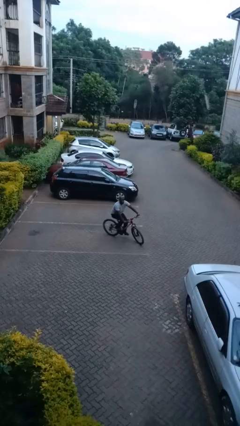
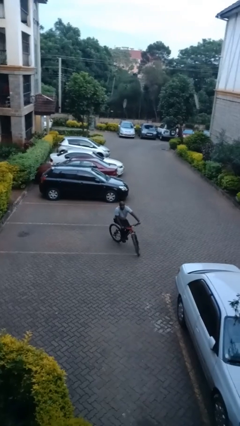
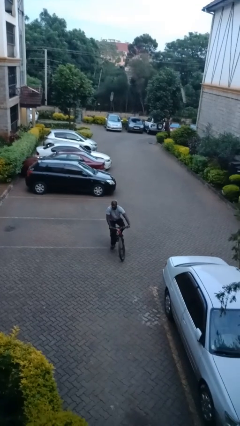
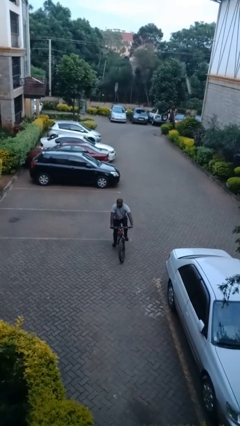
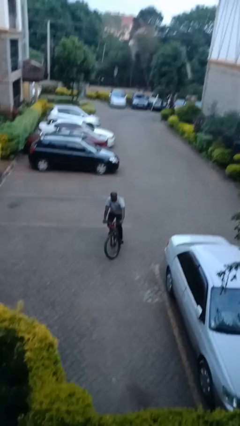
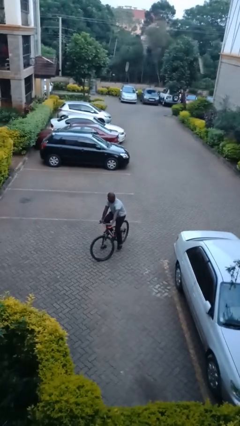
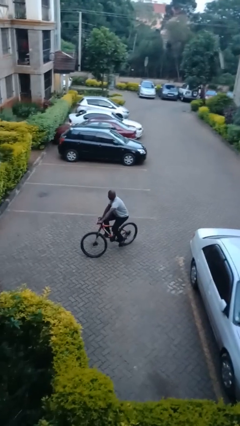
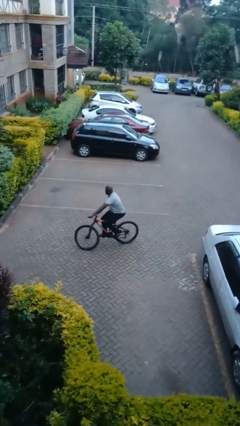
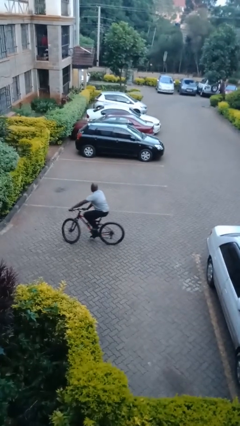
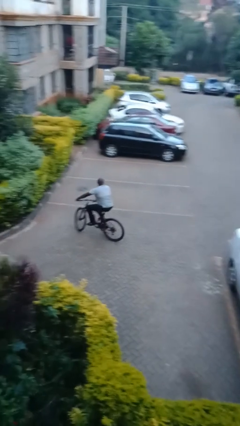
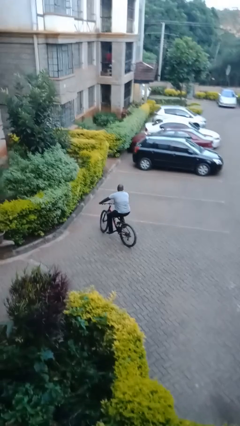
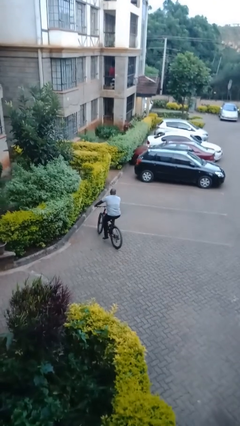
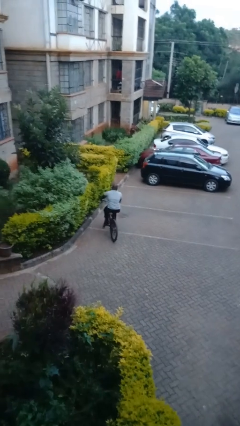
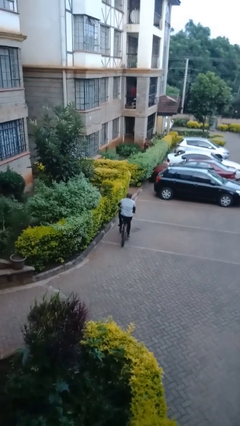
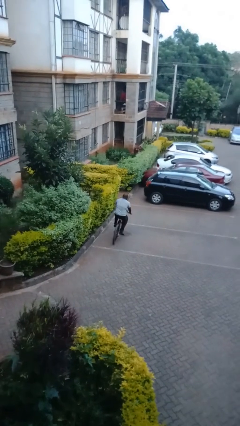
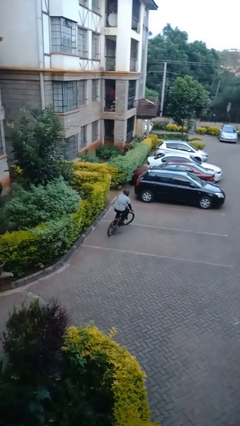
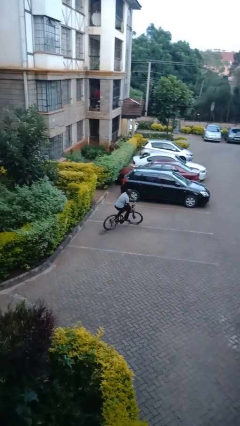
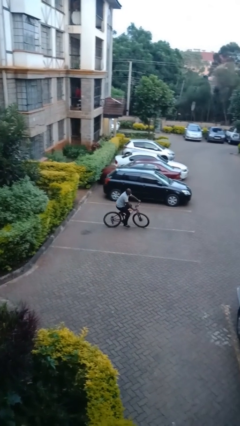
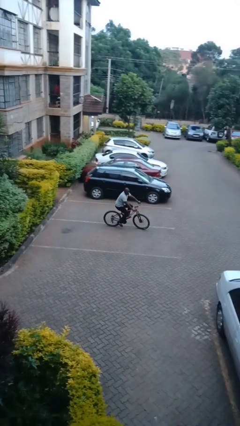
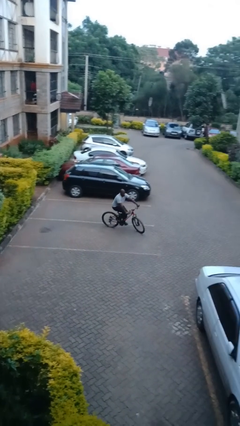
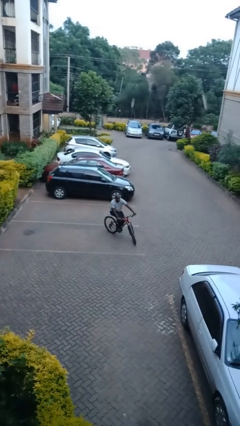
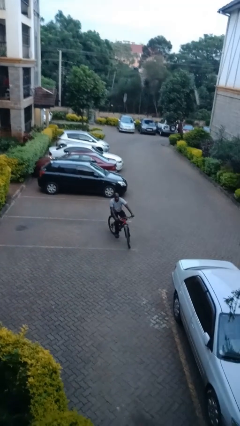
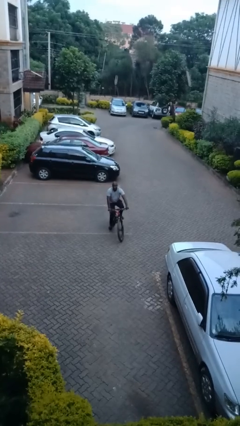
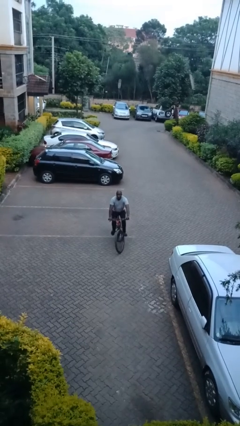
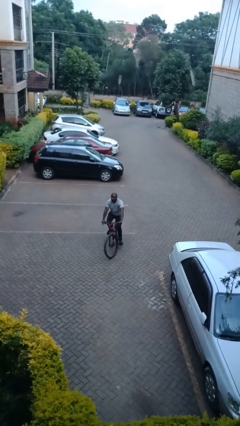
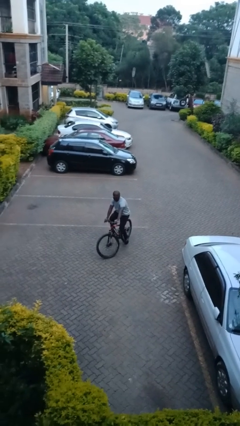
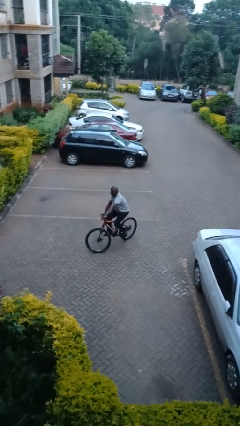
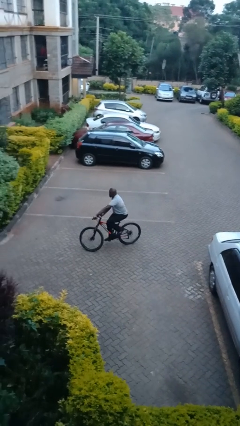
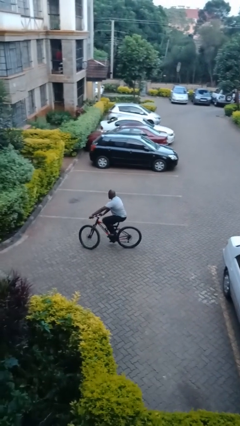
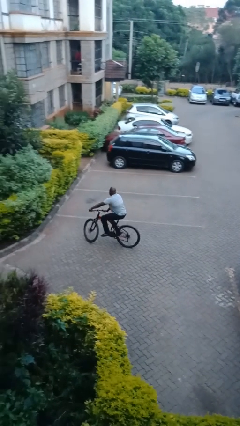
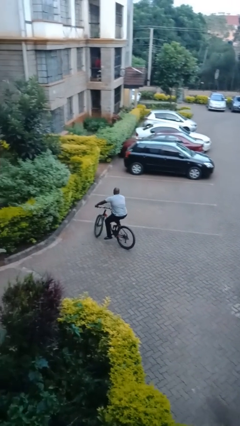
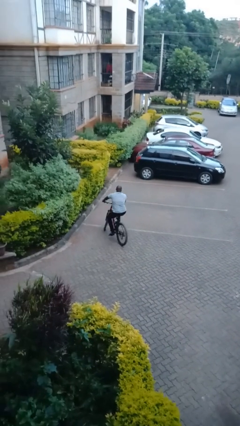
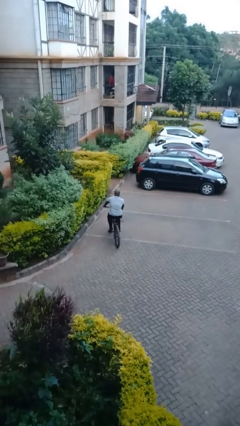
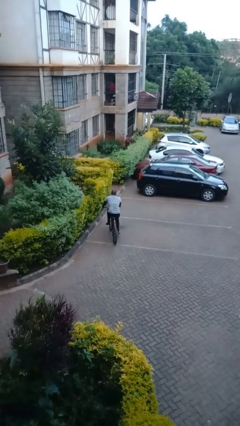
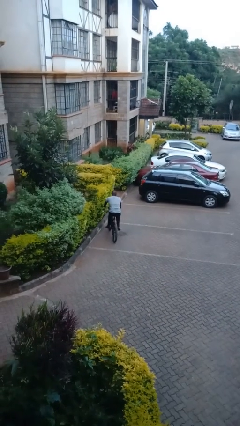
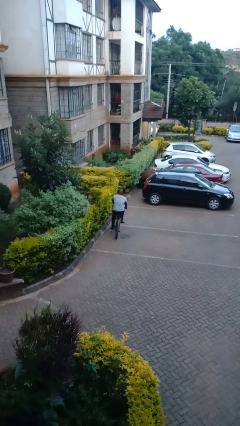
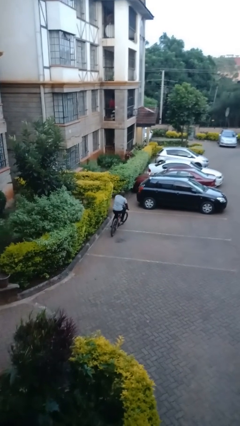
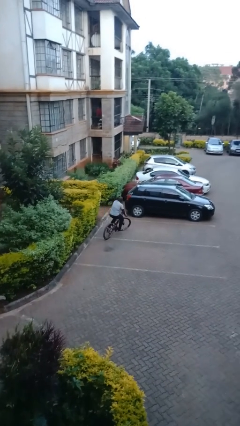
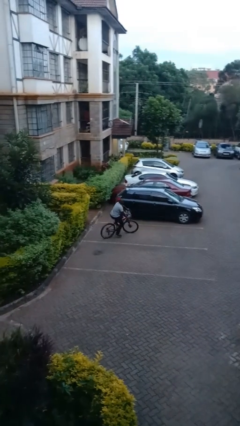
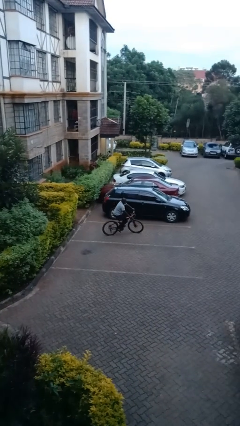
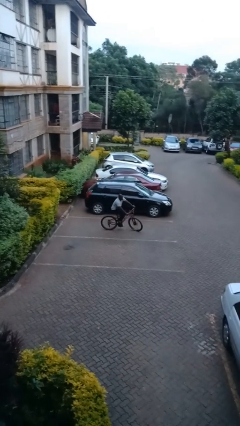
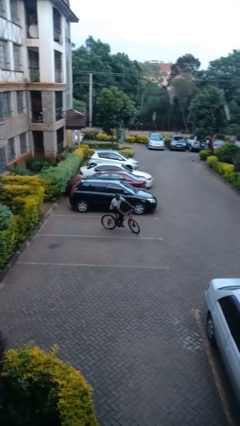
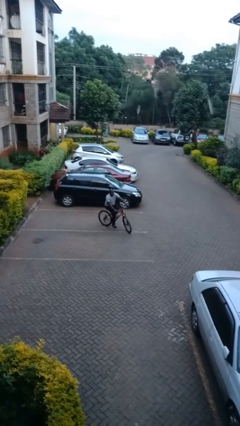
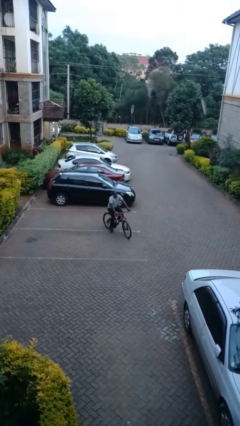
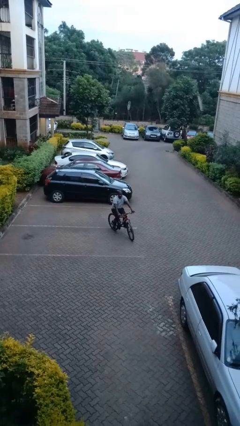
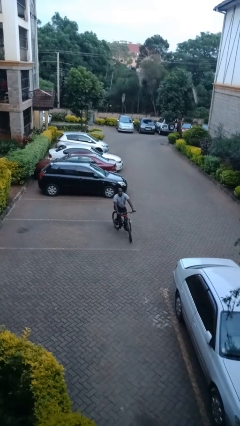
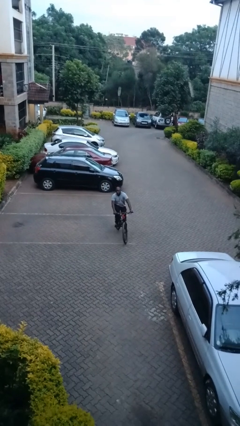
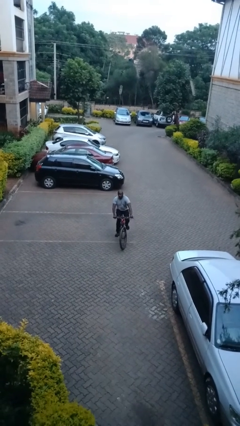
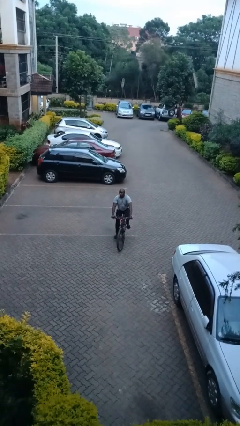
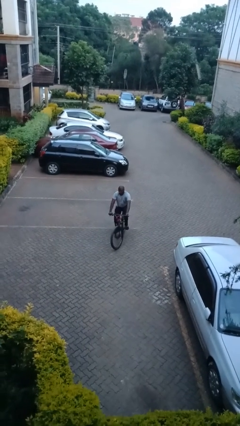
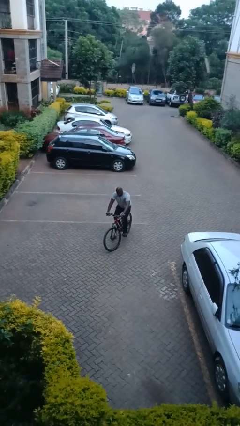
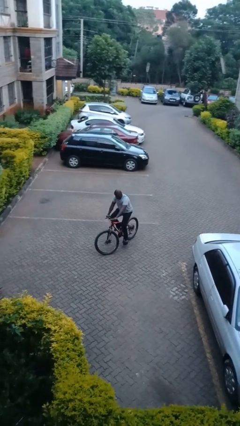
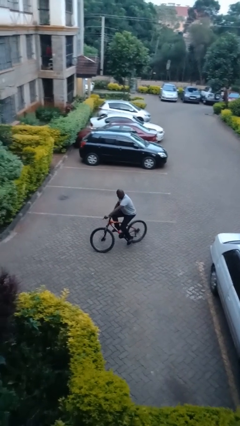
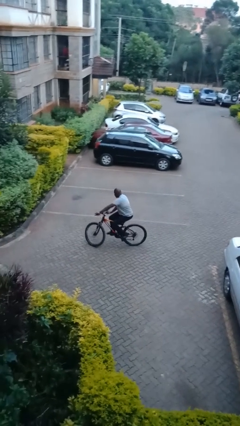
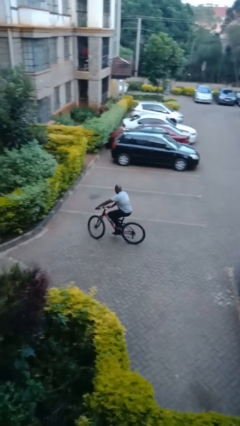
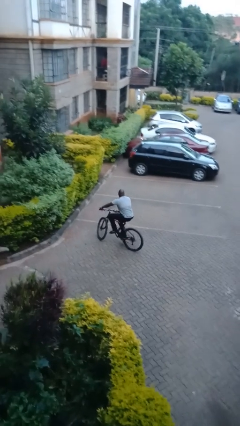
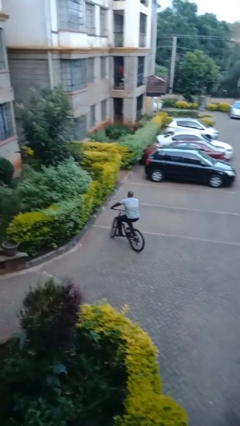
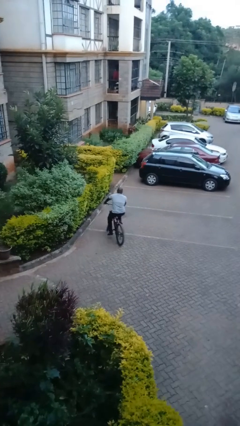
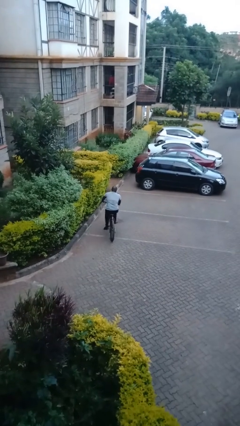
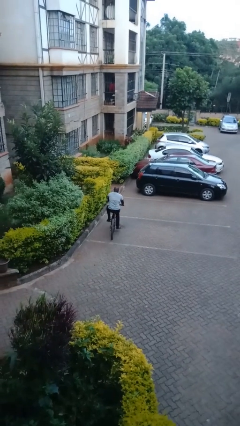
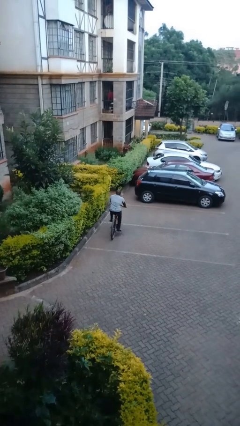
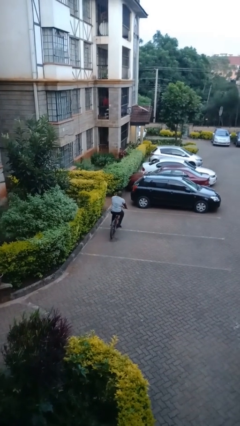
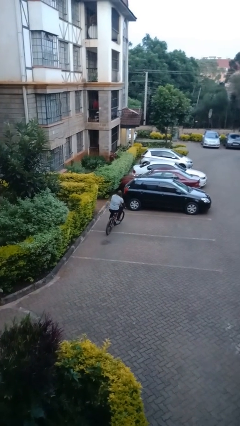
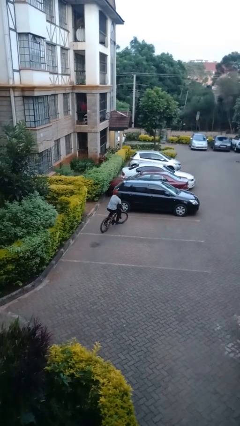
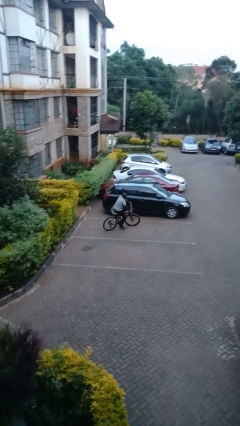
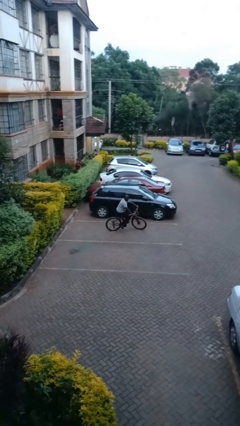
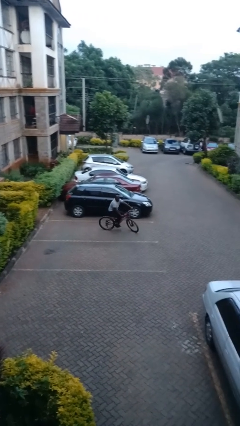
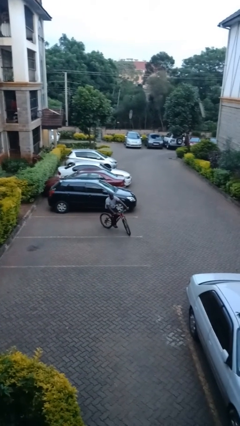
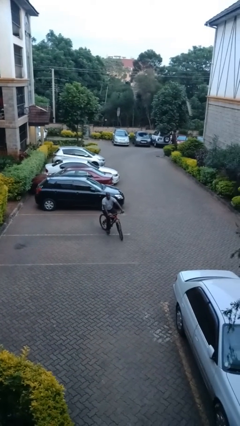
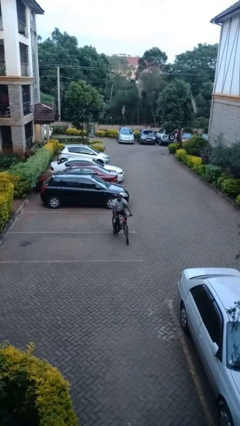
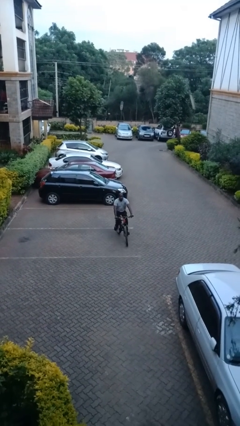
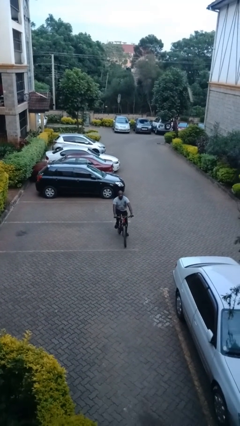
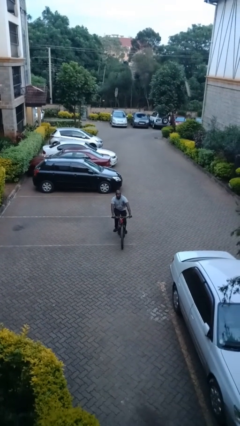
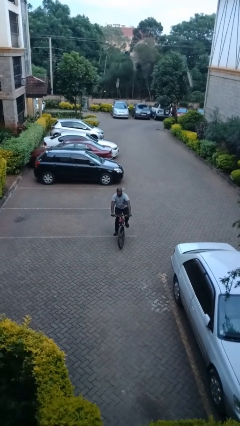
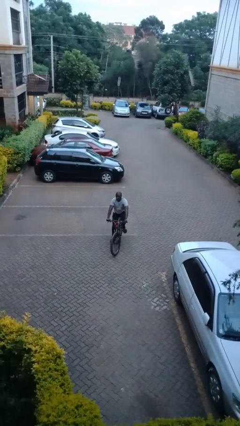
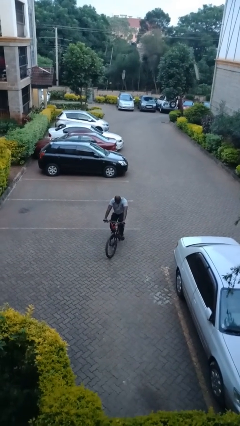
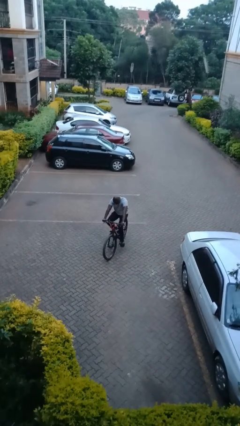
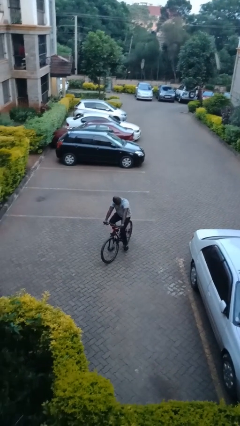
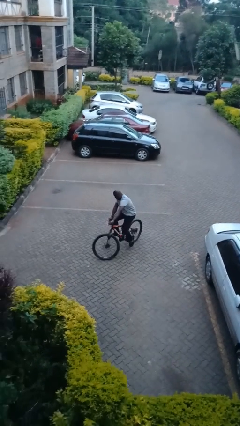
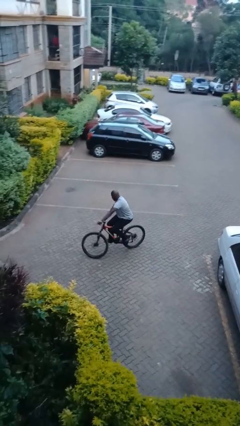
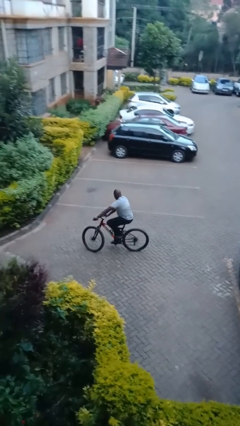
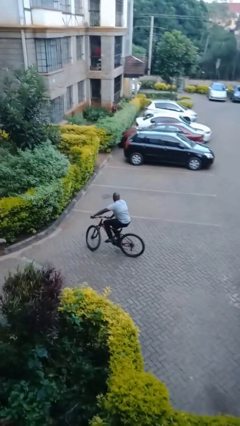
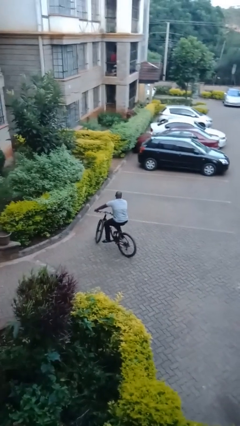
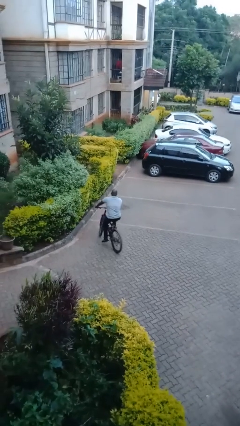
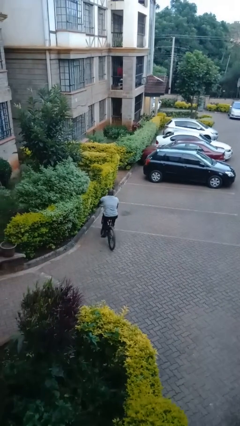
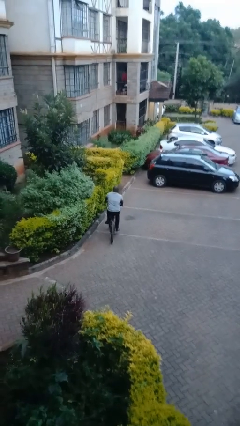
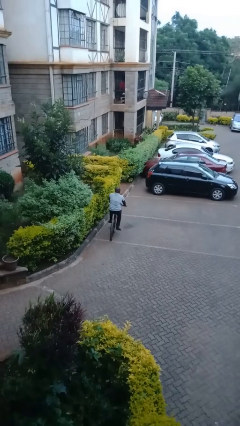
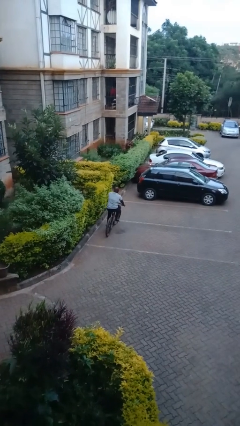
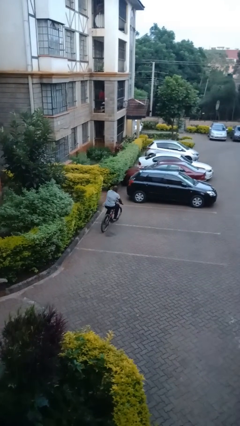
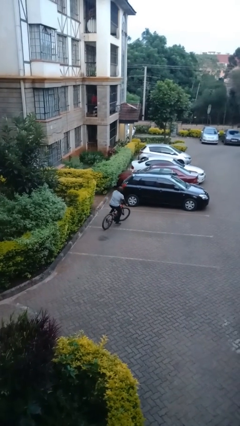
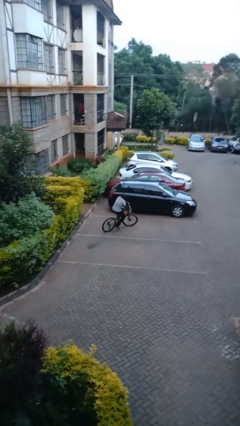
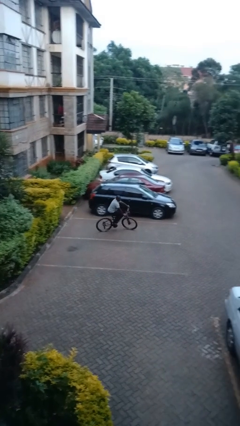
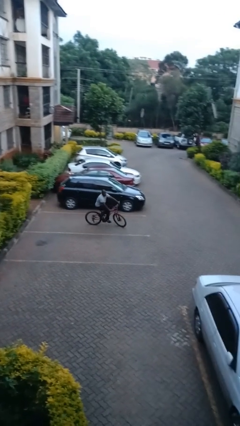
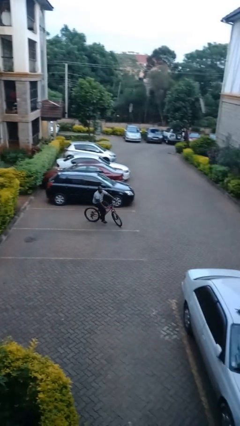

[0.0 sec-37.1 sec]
person rides bicycle
